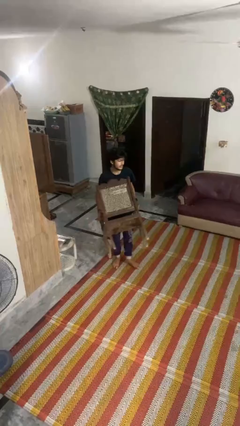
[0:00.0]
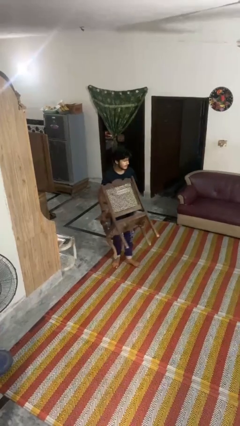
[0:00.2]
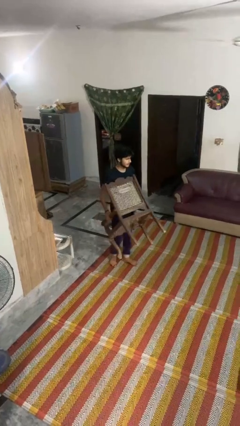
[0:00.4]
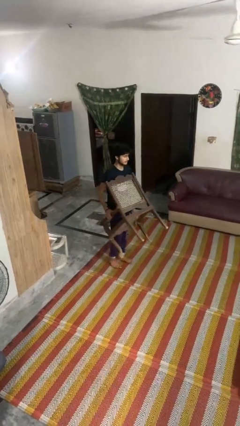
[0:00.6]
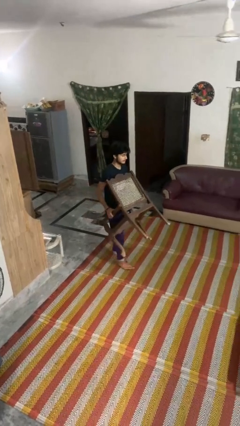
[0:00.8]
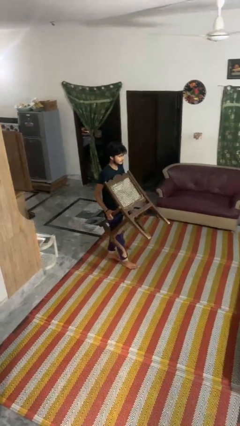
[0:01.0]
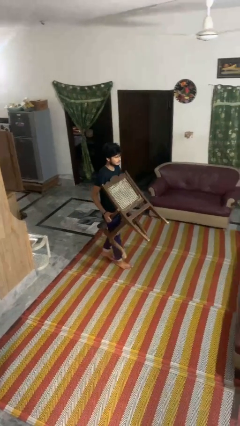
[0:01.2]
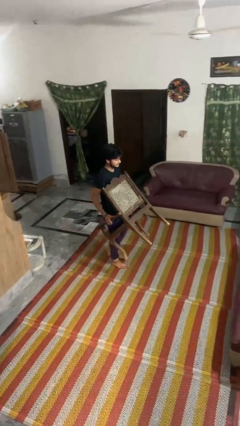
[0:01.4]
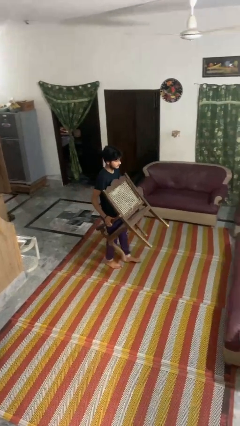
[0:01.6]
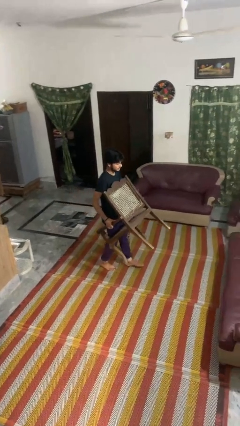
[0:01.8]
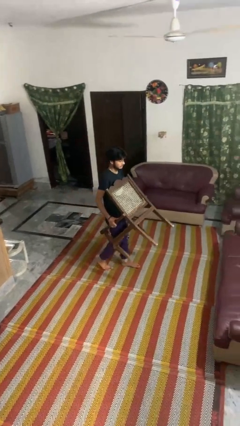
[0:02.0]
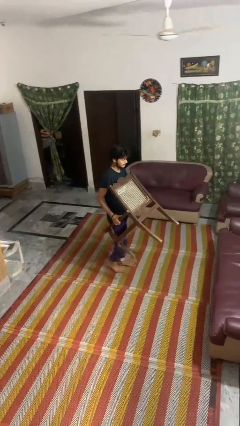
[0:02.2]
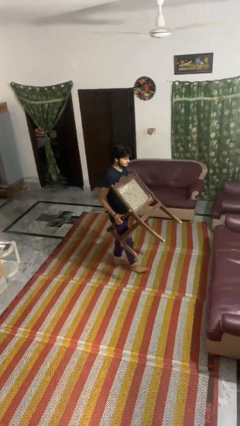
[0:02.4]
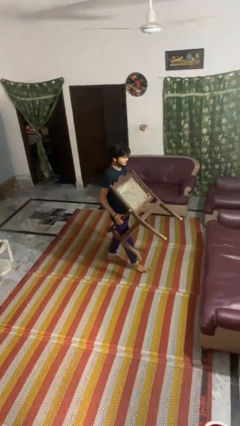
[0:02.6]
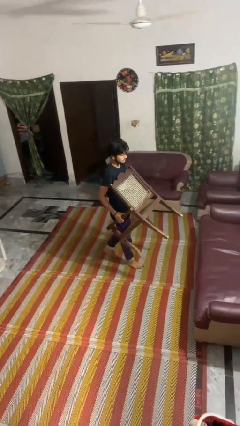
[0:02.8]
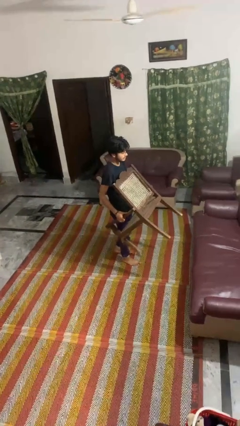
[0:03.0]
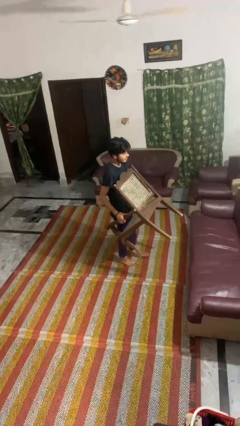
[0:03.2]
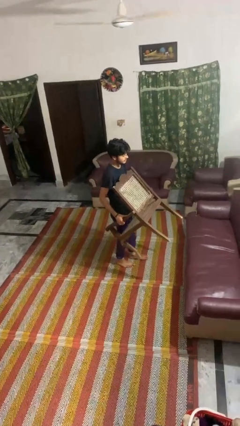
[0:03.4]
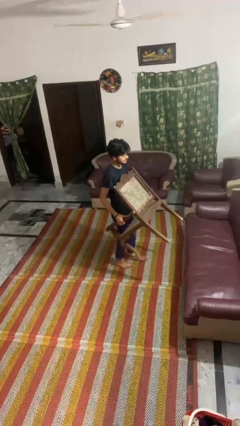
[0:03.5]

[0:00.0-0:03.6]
person carries furniture

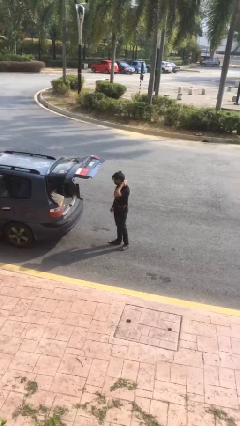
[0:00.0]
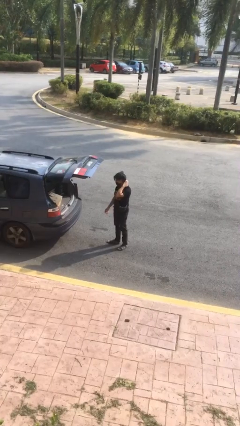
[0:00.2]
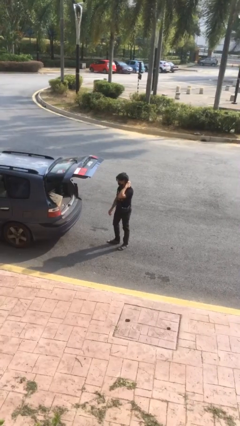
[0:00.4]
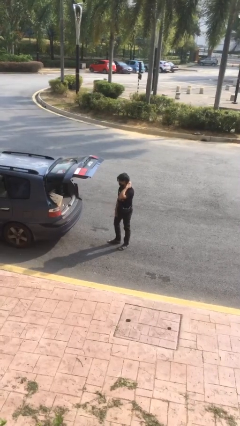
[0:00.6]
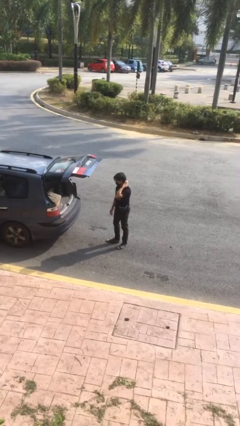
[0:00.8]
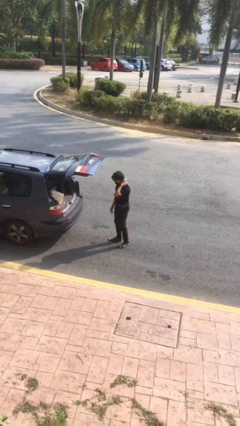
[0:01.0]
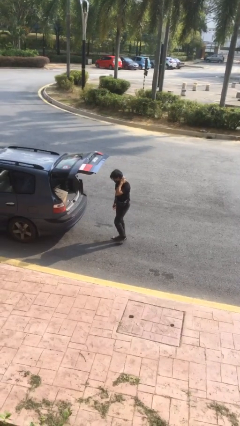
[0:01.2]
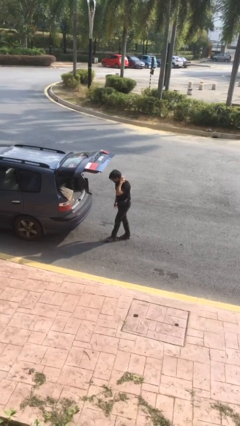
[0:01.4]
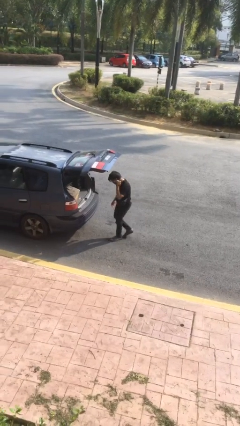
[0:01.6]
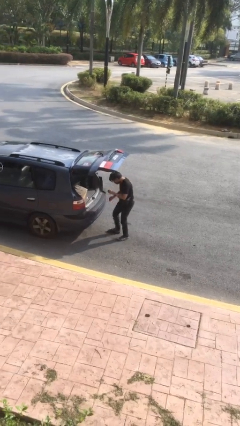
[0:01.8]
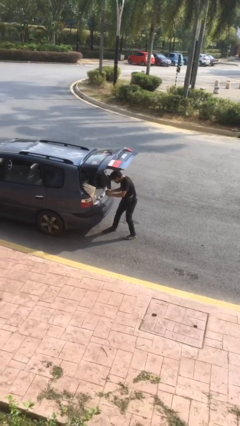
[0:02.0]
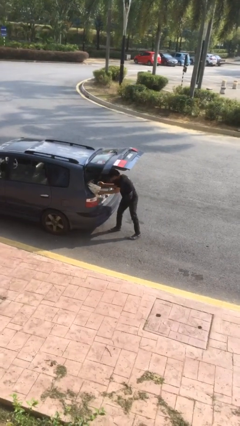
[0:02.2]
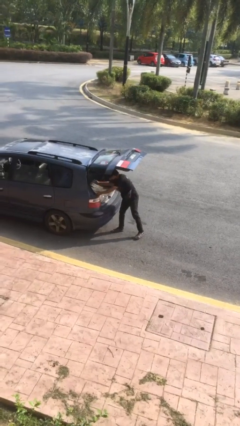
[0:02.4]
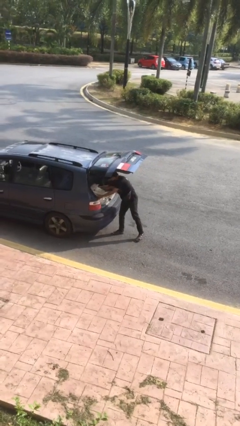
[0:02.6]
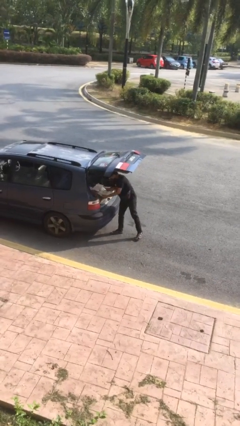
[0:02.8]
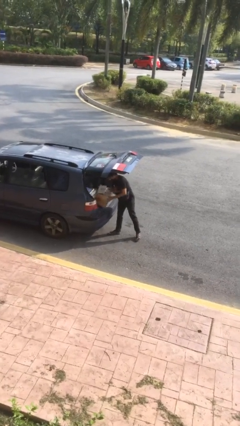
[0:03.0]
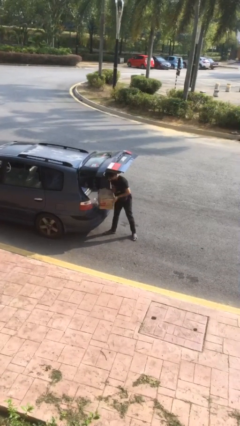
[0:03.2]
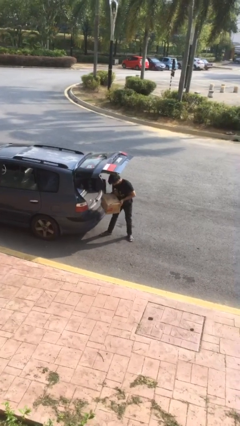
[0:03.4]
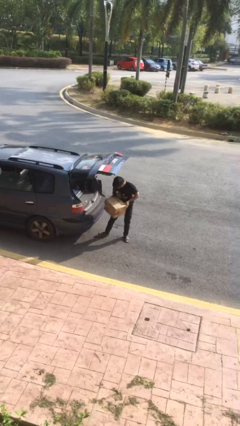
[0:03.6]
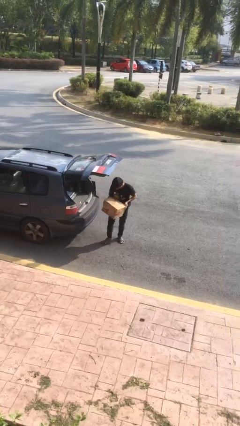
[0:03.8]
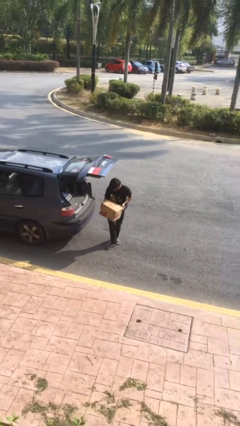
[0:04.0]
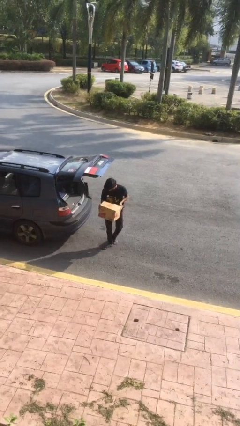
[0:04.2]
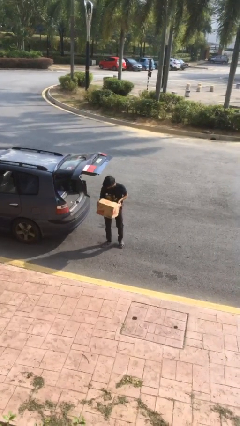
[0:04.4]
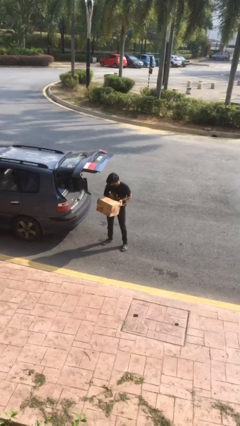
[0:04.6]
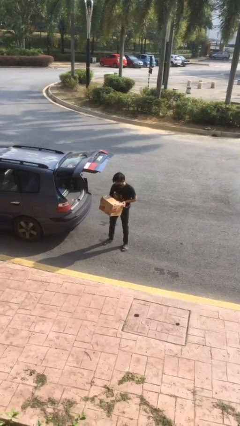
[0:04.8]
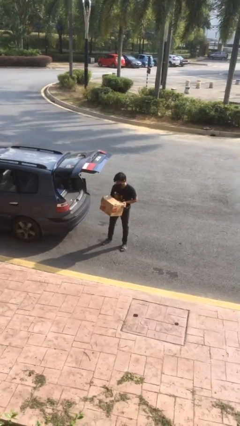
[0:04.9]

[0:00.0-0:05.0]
person unloads car

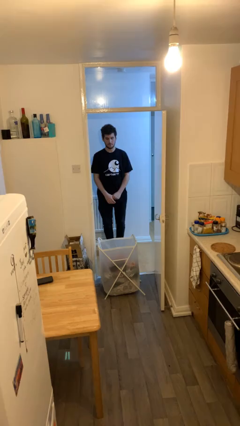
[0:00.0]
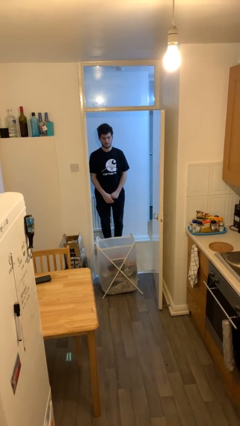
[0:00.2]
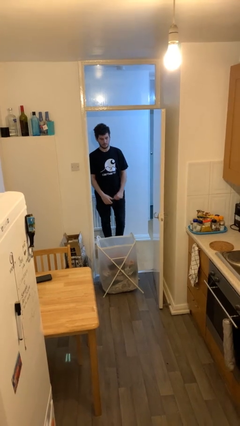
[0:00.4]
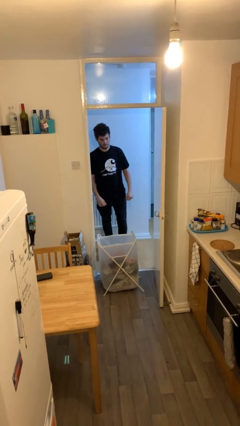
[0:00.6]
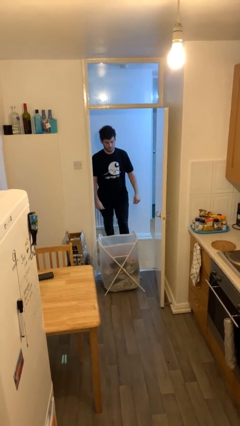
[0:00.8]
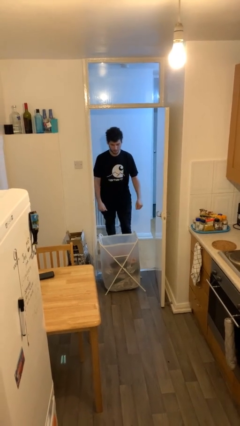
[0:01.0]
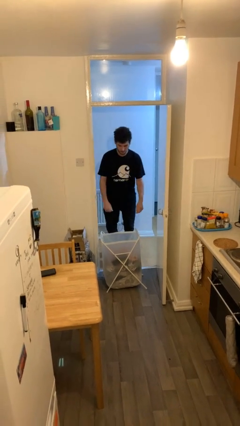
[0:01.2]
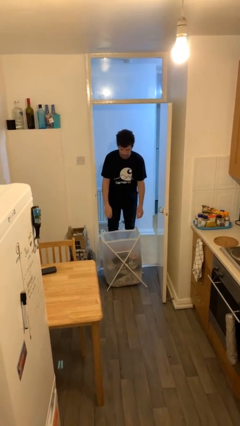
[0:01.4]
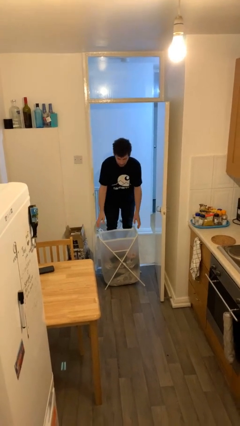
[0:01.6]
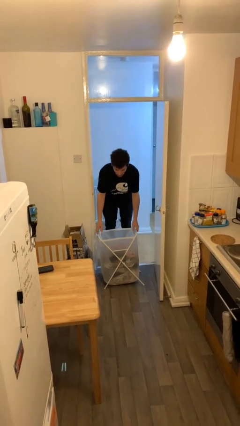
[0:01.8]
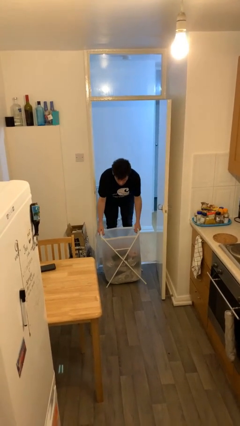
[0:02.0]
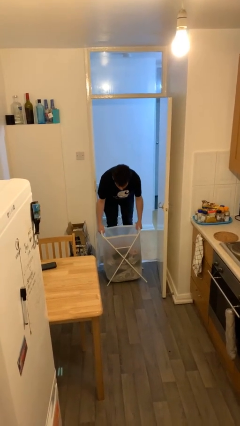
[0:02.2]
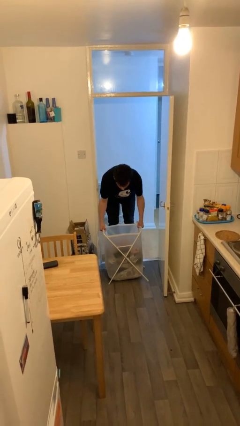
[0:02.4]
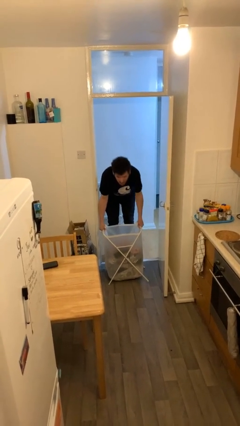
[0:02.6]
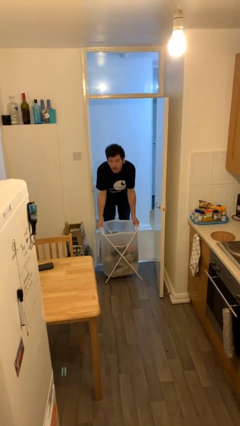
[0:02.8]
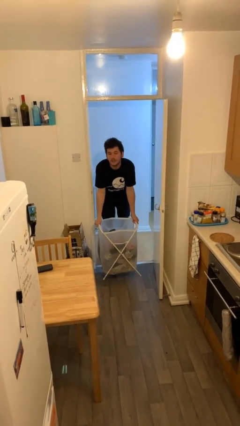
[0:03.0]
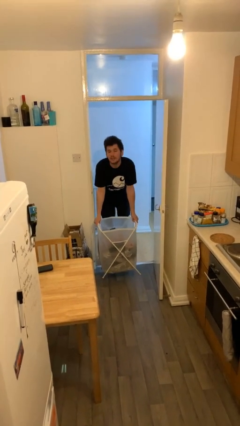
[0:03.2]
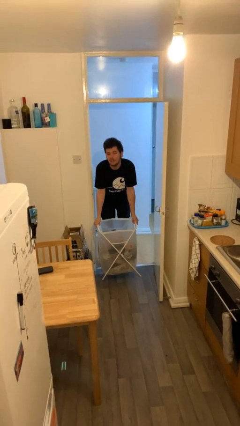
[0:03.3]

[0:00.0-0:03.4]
person picks up object from floor

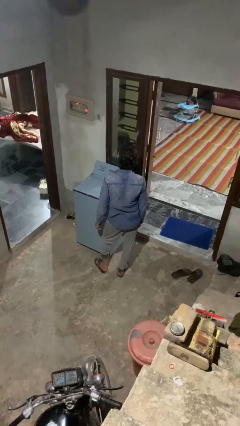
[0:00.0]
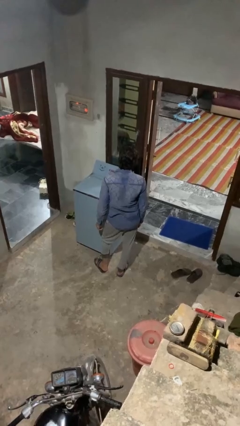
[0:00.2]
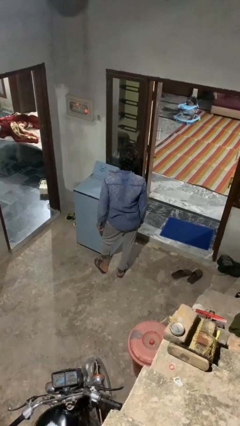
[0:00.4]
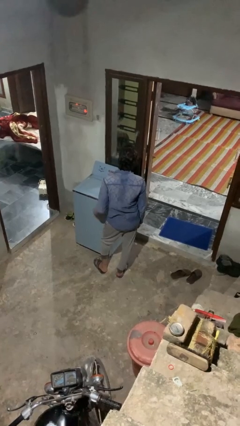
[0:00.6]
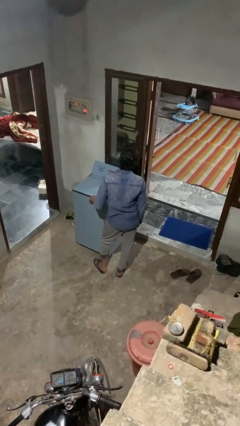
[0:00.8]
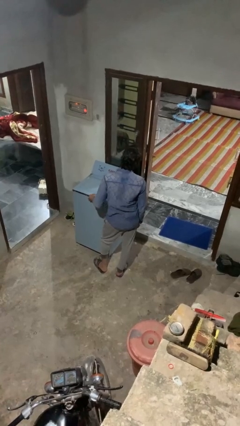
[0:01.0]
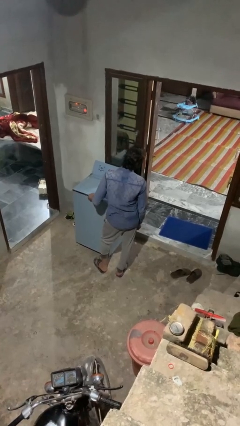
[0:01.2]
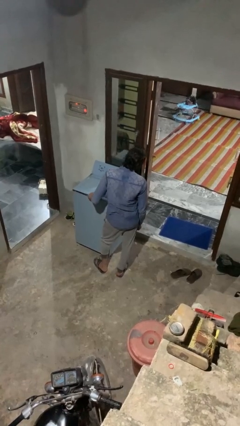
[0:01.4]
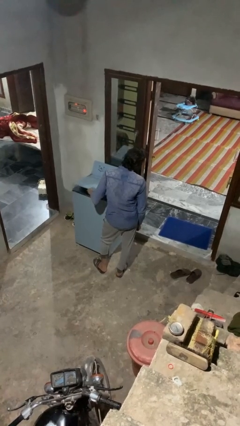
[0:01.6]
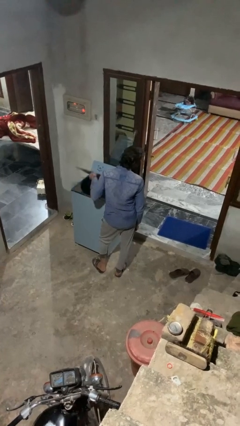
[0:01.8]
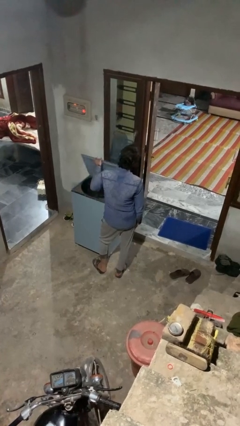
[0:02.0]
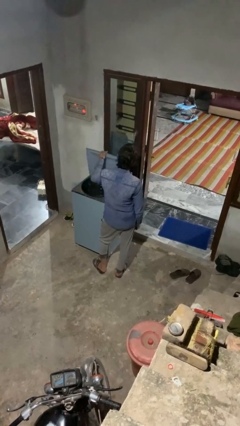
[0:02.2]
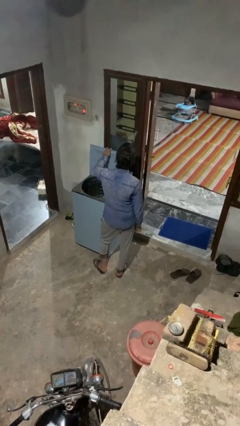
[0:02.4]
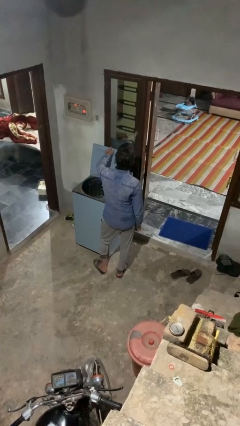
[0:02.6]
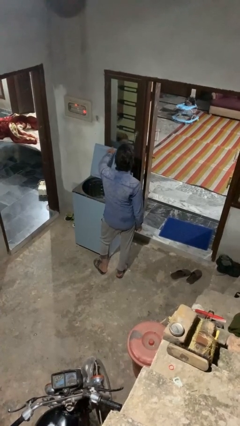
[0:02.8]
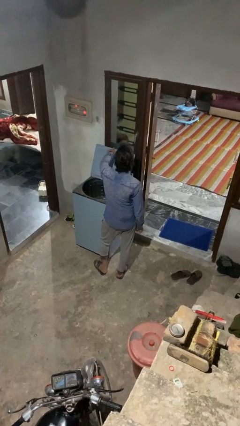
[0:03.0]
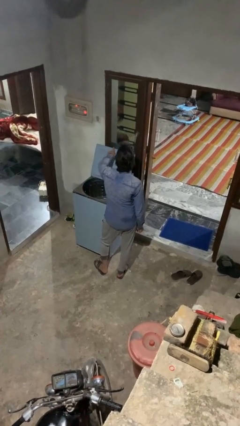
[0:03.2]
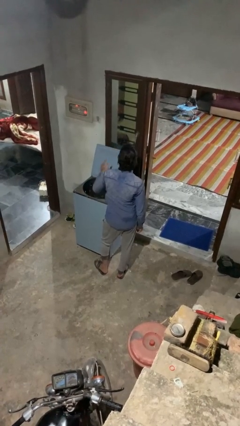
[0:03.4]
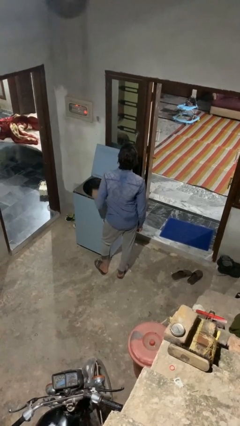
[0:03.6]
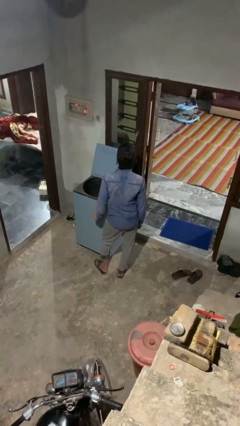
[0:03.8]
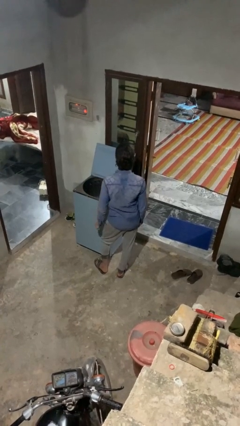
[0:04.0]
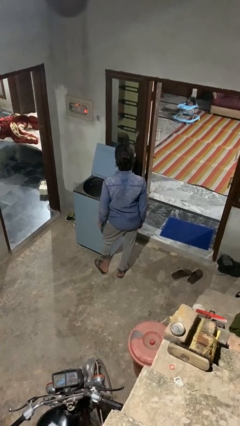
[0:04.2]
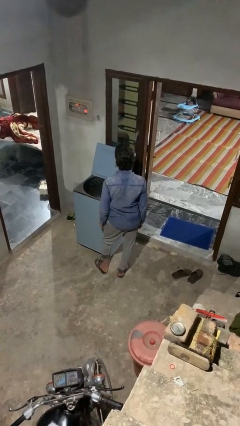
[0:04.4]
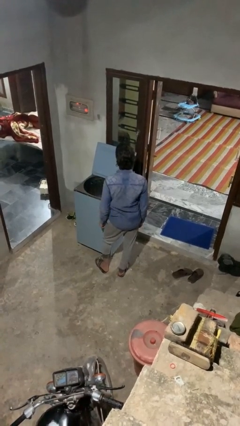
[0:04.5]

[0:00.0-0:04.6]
person opens clothes washer

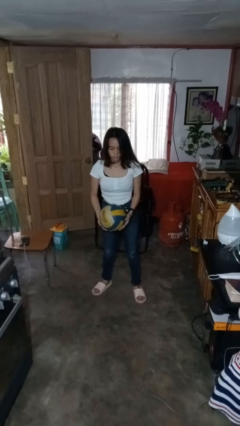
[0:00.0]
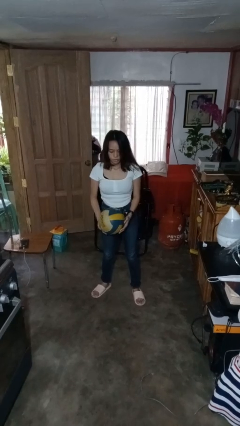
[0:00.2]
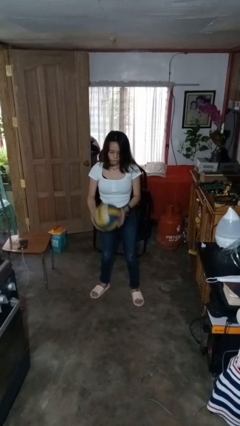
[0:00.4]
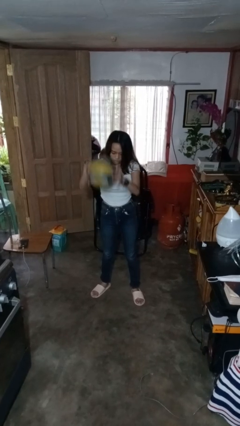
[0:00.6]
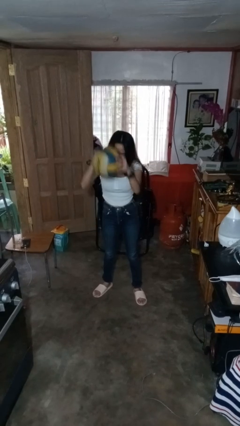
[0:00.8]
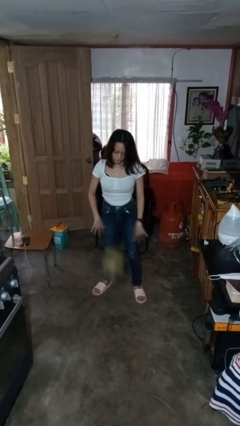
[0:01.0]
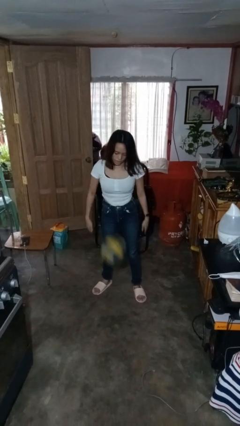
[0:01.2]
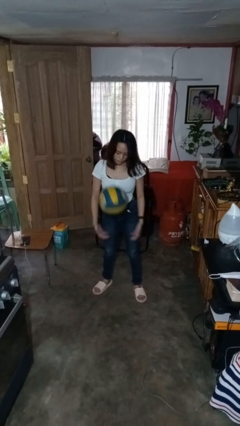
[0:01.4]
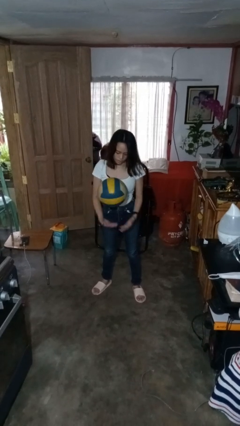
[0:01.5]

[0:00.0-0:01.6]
person bounces ball on floor
